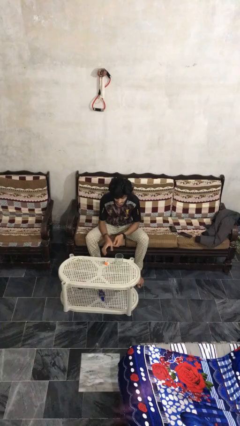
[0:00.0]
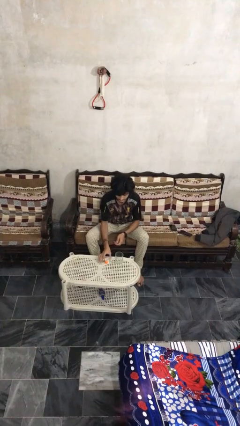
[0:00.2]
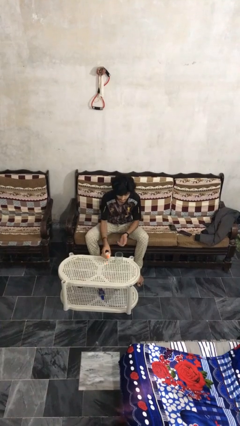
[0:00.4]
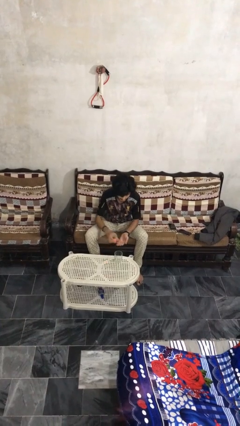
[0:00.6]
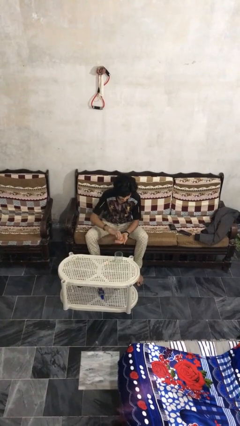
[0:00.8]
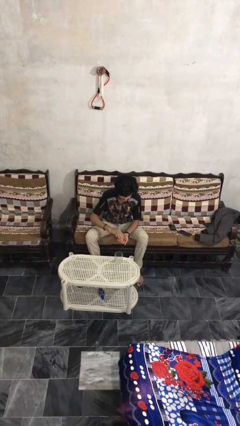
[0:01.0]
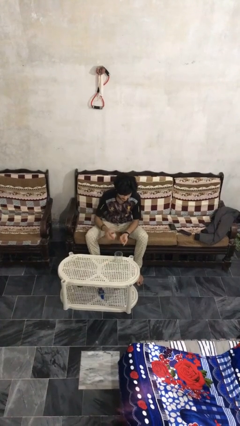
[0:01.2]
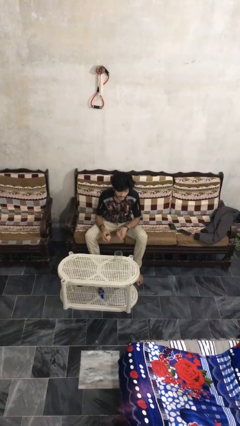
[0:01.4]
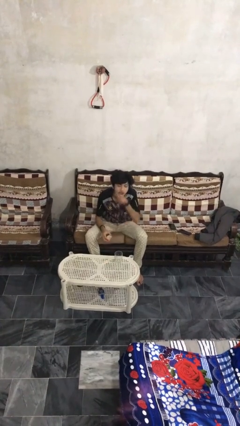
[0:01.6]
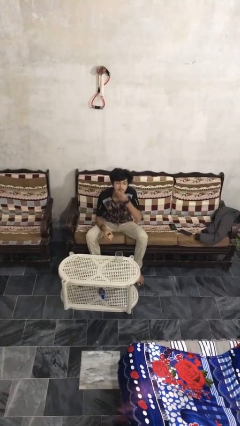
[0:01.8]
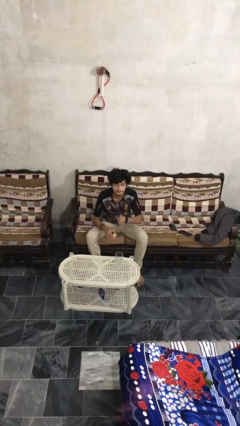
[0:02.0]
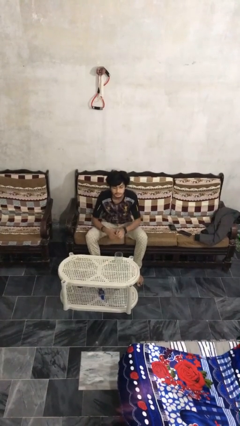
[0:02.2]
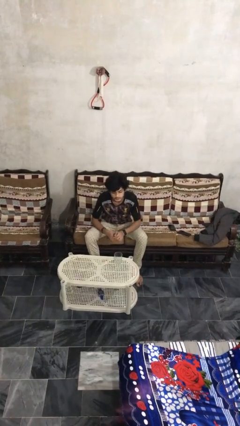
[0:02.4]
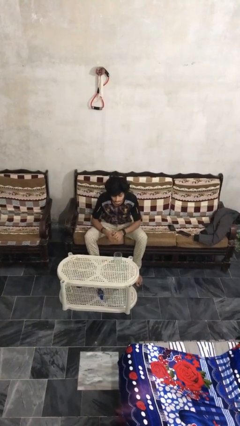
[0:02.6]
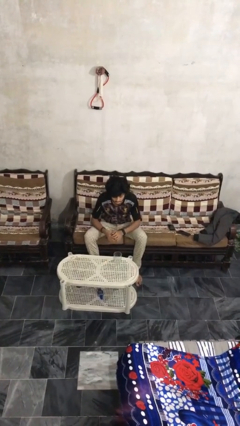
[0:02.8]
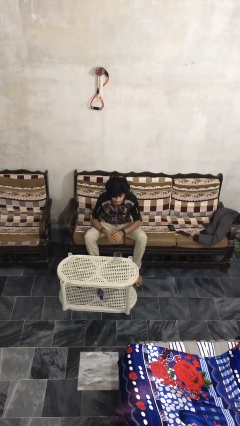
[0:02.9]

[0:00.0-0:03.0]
person takes medicine pills

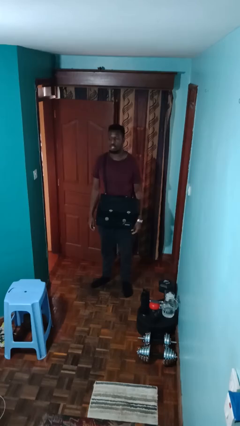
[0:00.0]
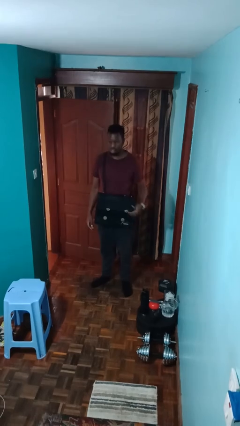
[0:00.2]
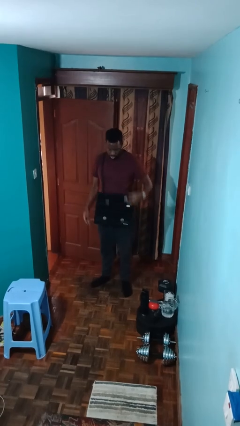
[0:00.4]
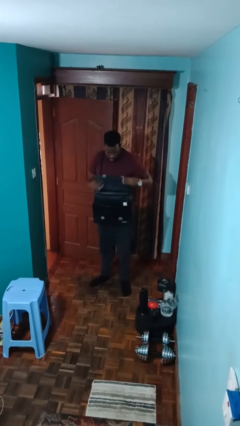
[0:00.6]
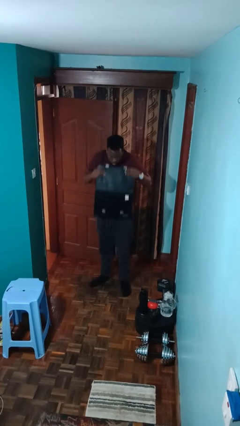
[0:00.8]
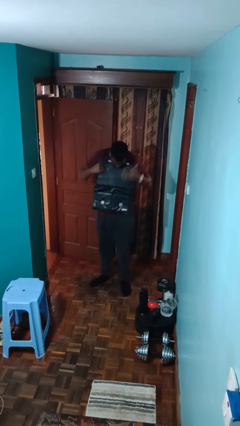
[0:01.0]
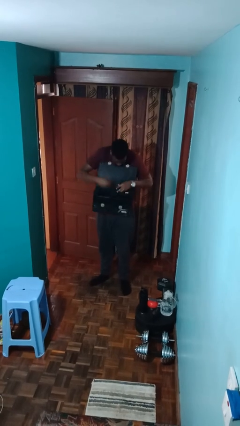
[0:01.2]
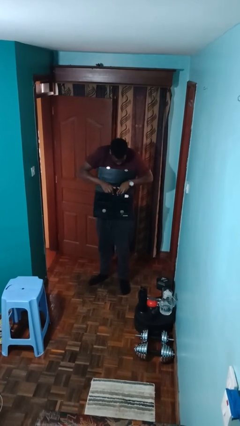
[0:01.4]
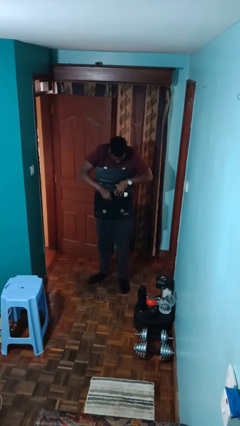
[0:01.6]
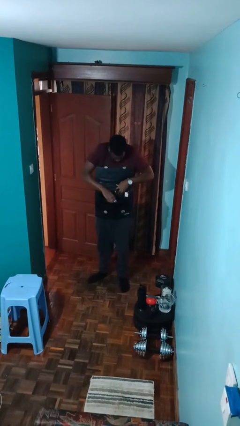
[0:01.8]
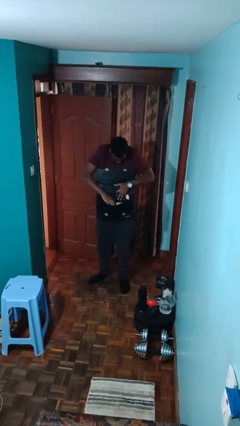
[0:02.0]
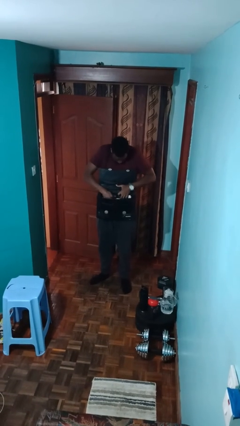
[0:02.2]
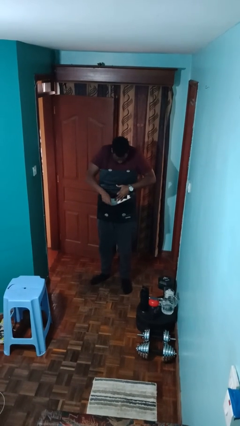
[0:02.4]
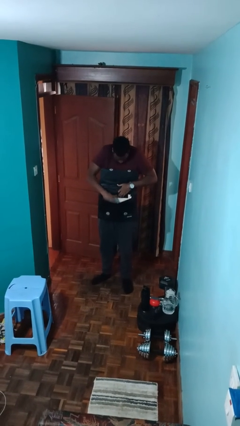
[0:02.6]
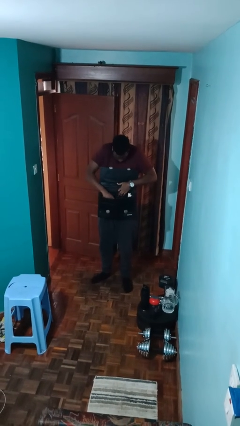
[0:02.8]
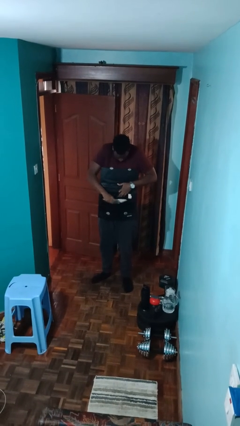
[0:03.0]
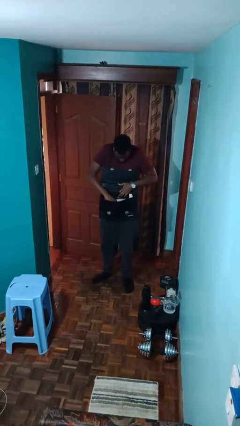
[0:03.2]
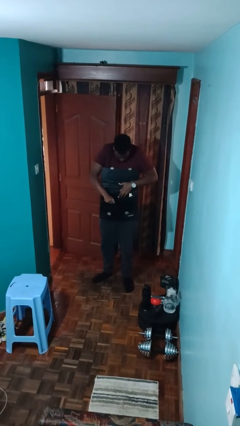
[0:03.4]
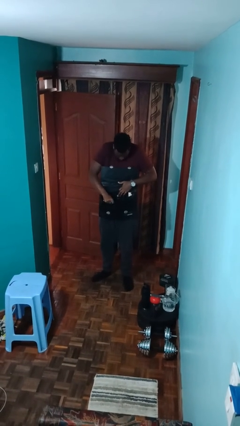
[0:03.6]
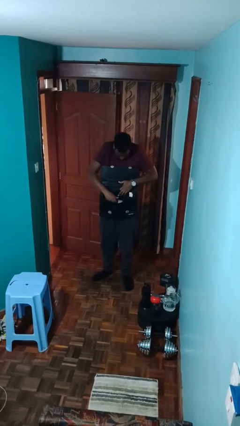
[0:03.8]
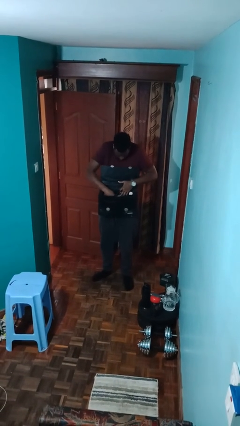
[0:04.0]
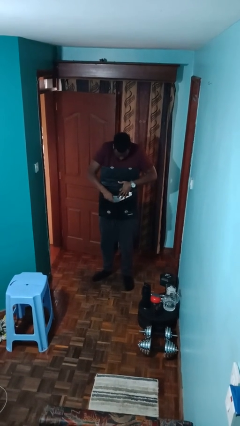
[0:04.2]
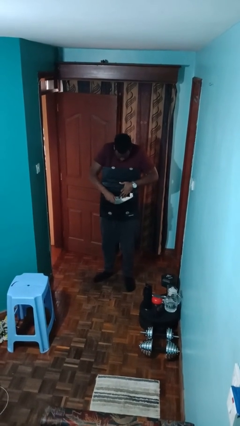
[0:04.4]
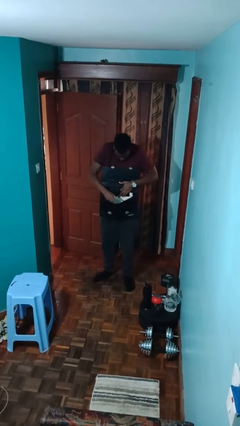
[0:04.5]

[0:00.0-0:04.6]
person searches in purse

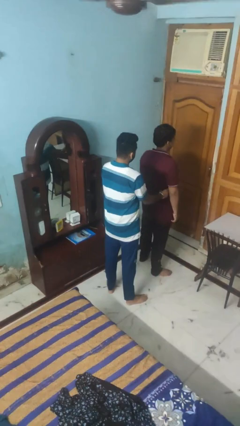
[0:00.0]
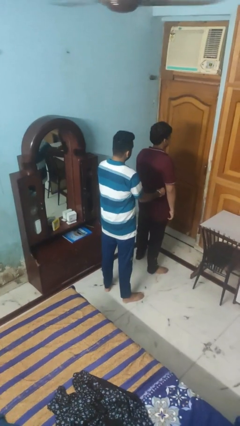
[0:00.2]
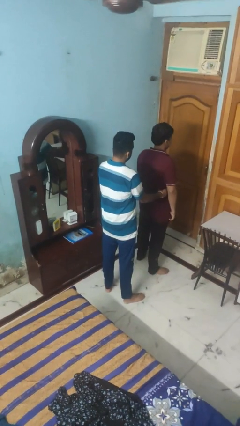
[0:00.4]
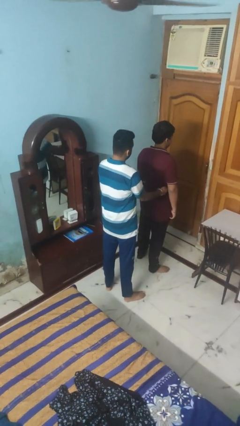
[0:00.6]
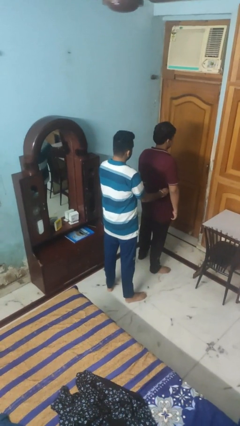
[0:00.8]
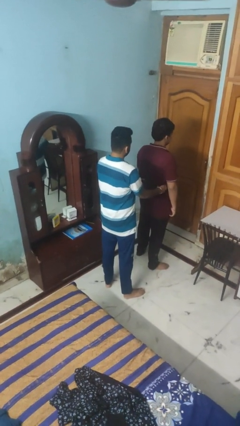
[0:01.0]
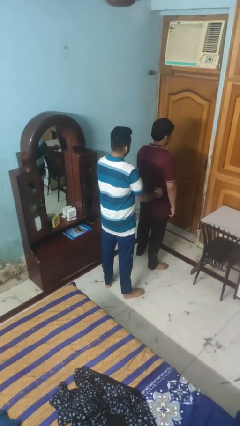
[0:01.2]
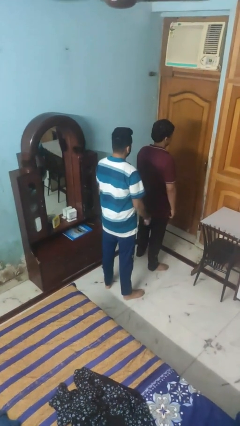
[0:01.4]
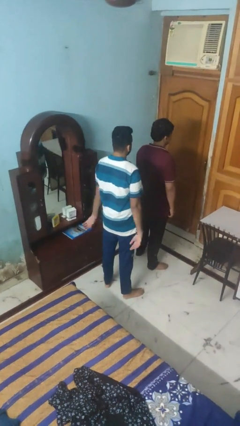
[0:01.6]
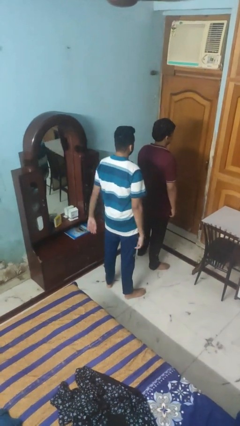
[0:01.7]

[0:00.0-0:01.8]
person tickles person

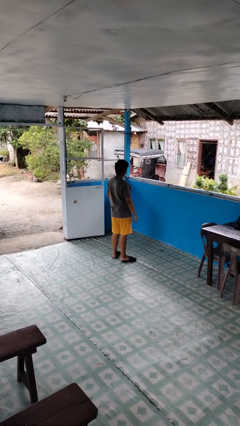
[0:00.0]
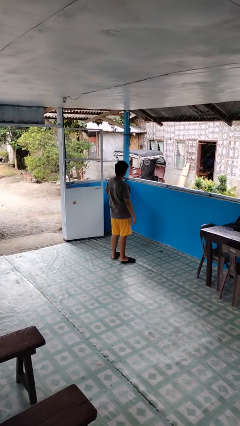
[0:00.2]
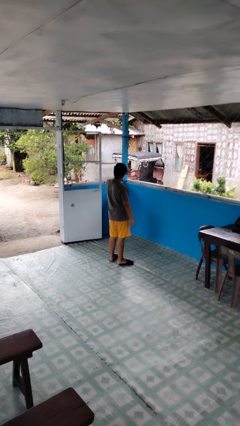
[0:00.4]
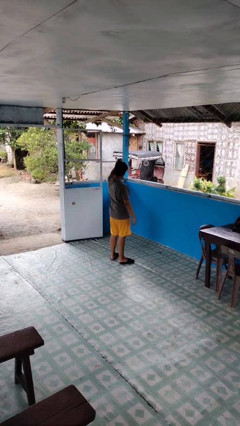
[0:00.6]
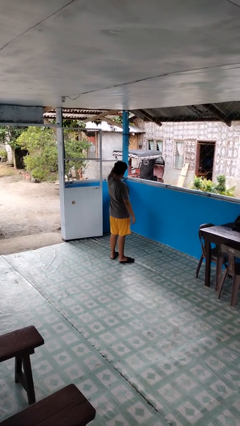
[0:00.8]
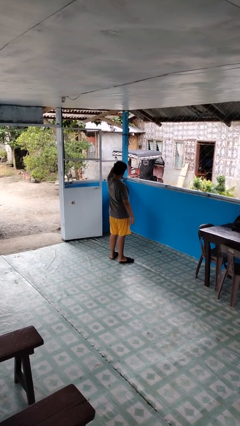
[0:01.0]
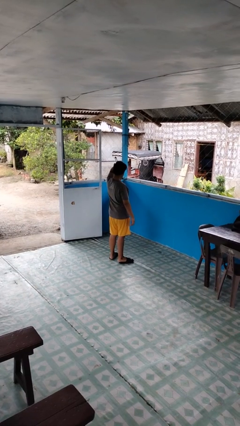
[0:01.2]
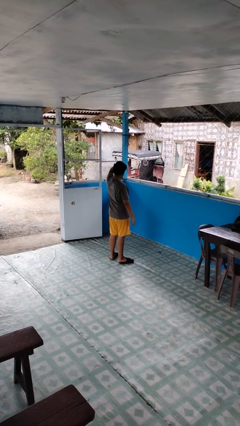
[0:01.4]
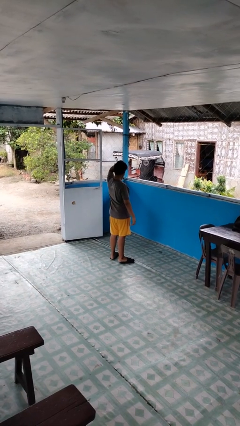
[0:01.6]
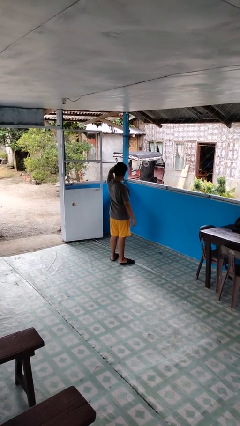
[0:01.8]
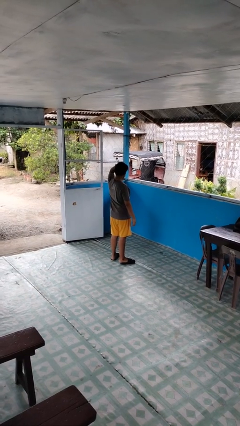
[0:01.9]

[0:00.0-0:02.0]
person pats head

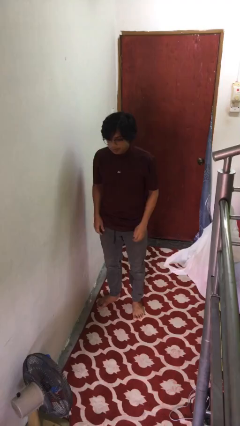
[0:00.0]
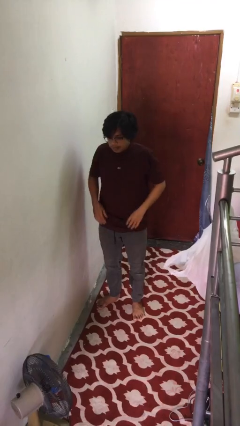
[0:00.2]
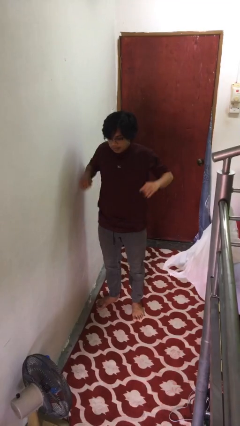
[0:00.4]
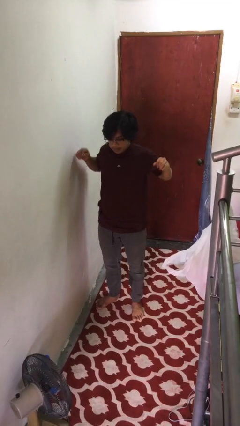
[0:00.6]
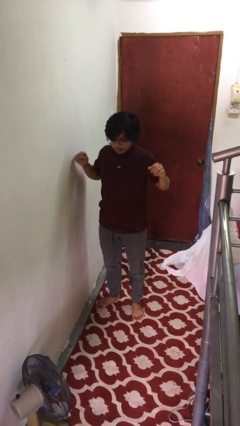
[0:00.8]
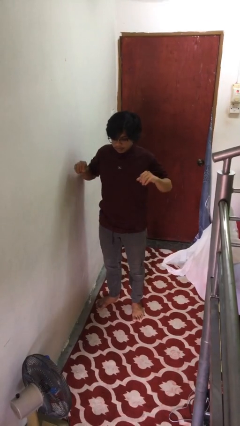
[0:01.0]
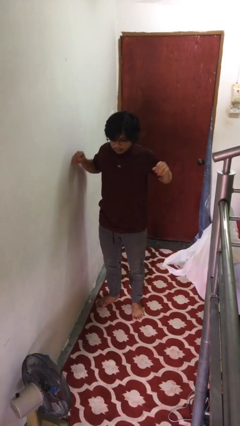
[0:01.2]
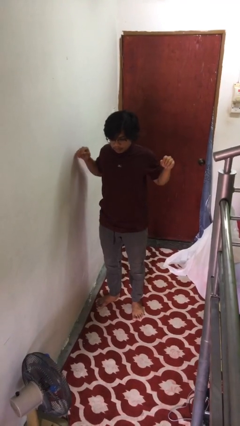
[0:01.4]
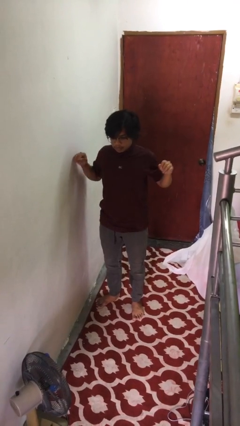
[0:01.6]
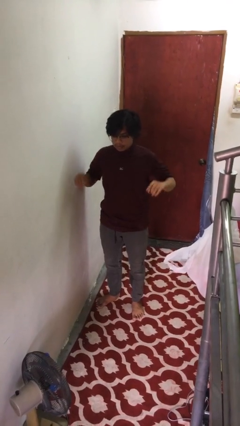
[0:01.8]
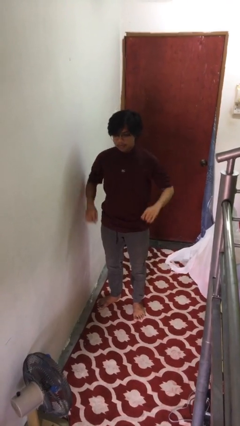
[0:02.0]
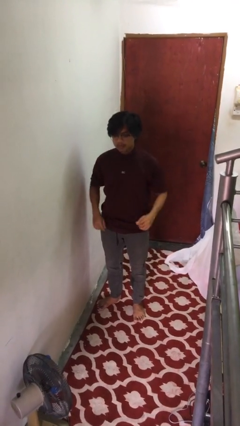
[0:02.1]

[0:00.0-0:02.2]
person stretches arms to side

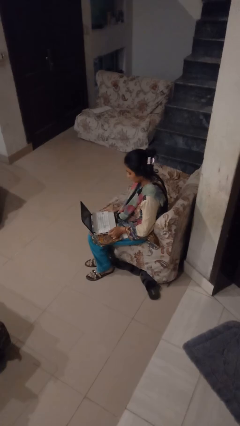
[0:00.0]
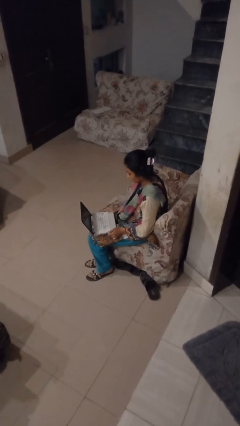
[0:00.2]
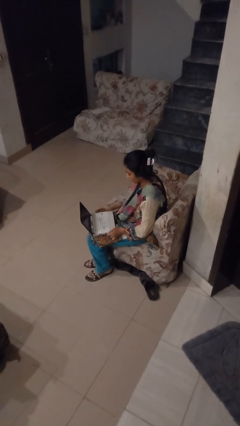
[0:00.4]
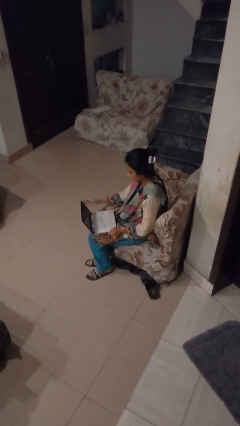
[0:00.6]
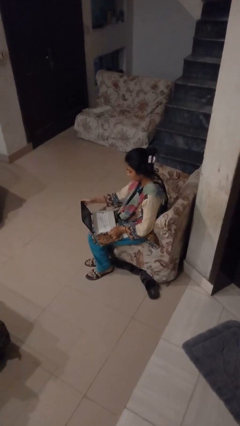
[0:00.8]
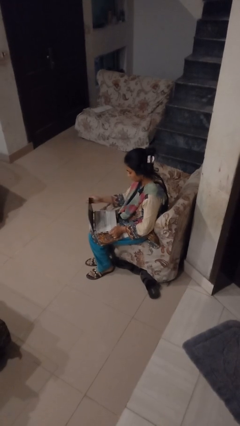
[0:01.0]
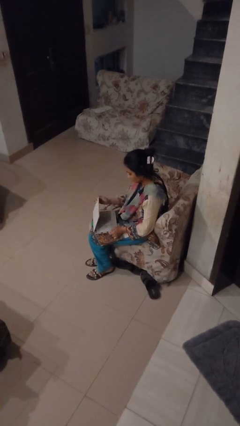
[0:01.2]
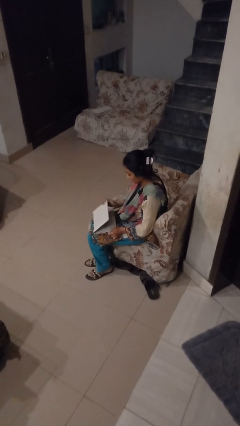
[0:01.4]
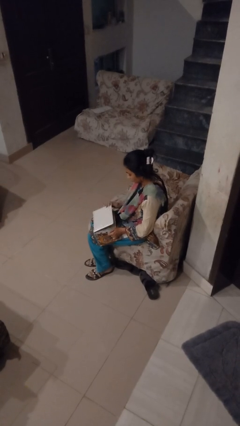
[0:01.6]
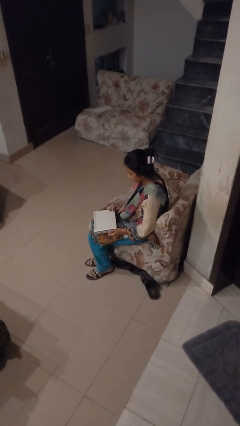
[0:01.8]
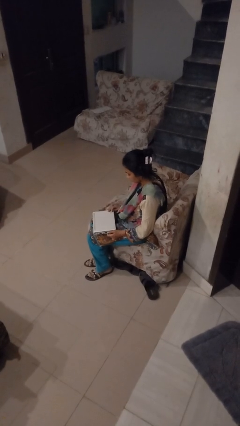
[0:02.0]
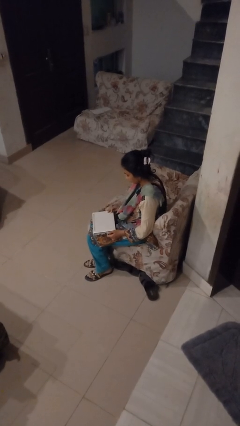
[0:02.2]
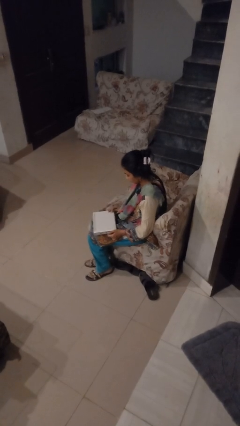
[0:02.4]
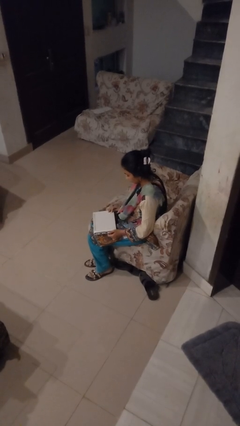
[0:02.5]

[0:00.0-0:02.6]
person closes laptop

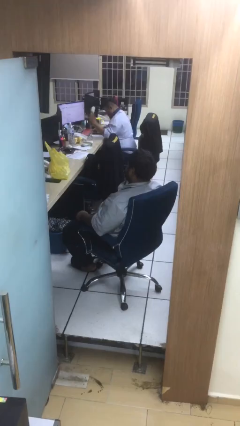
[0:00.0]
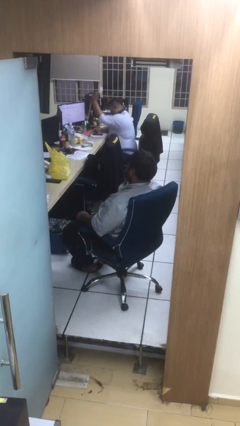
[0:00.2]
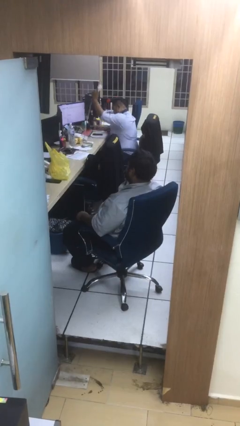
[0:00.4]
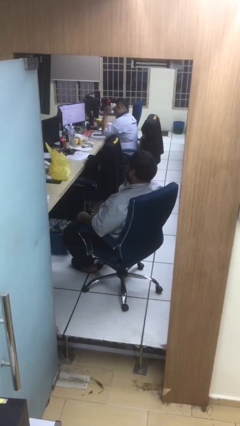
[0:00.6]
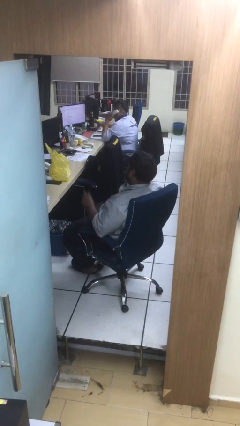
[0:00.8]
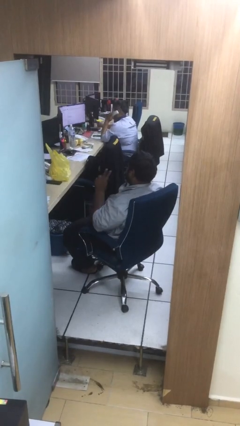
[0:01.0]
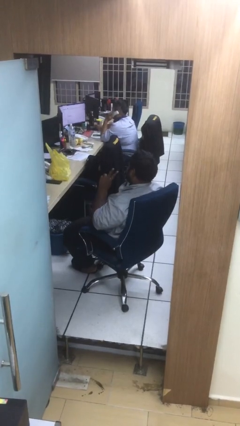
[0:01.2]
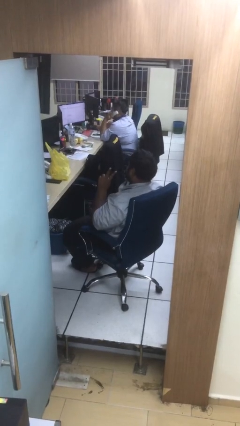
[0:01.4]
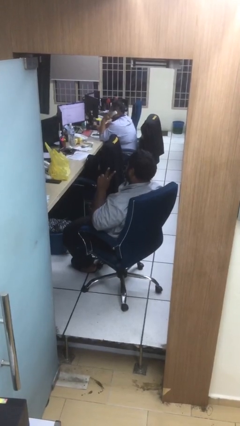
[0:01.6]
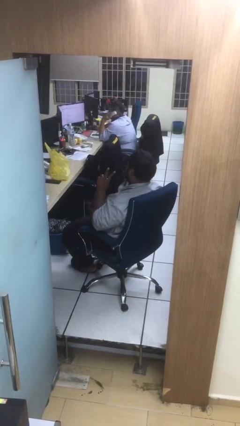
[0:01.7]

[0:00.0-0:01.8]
person gestures peace
